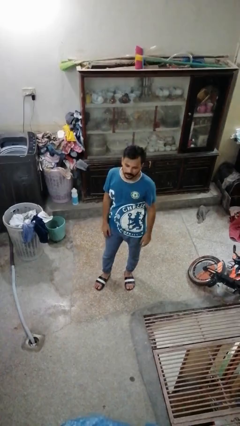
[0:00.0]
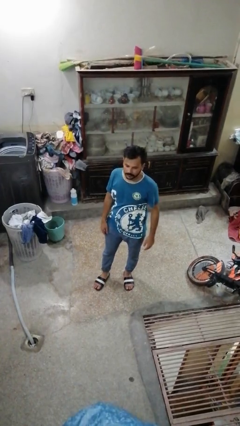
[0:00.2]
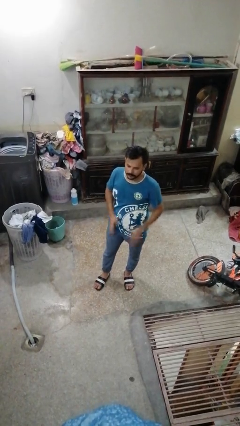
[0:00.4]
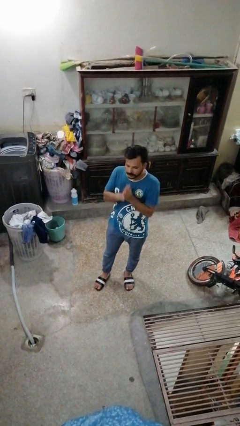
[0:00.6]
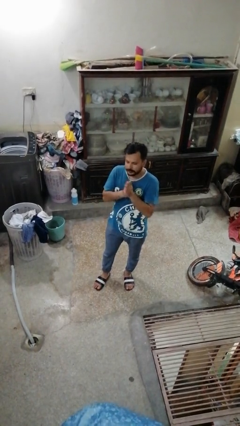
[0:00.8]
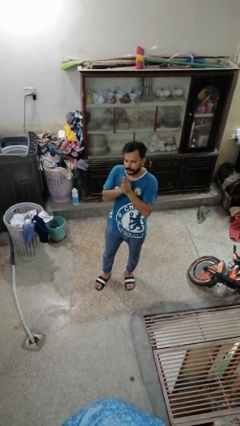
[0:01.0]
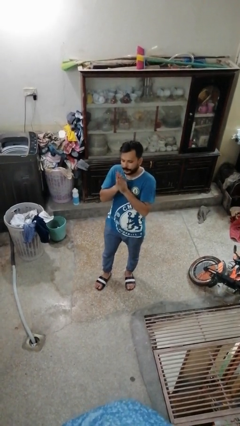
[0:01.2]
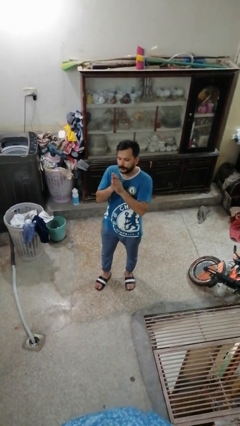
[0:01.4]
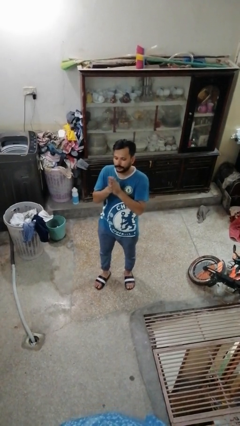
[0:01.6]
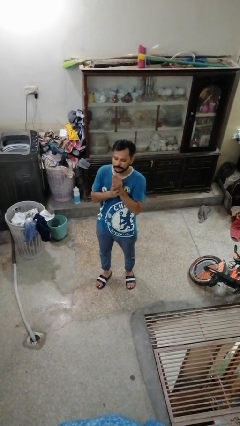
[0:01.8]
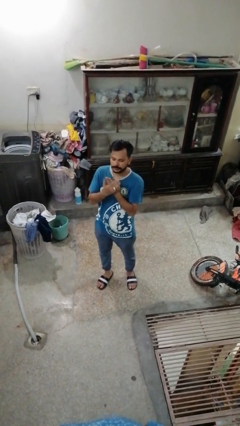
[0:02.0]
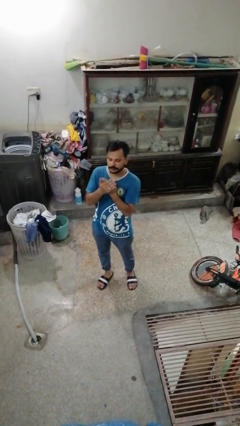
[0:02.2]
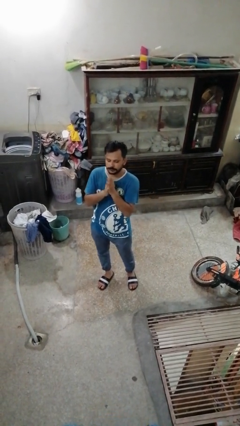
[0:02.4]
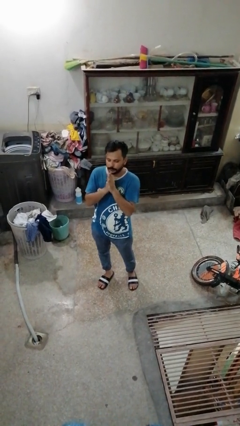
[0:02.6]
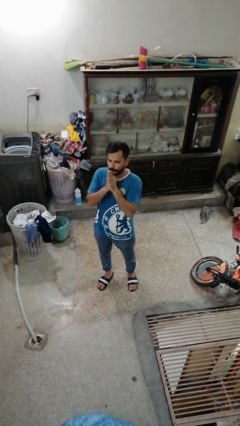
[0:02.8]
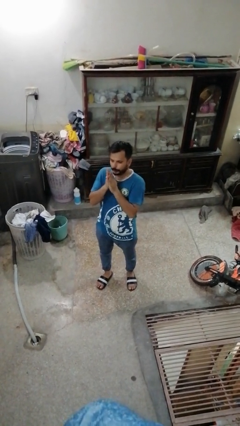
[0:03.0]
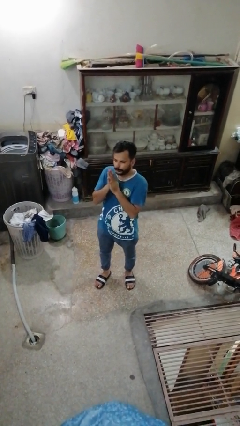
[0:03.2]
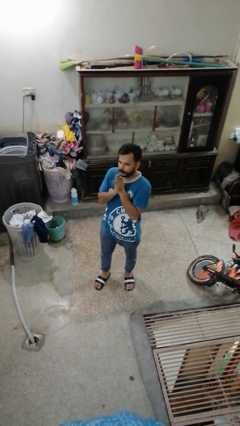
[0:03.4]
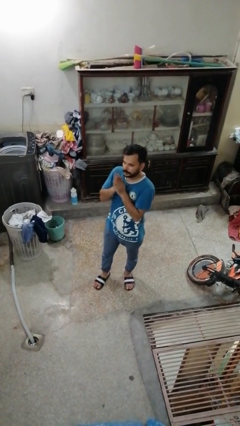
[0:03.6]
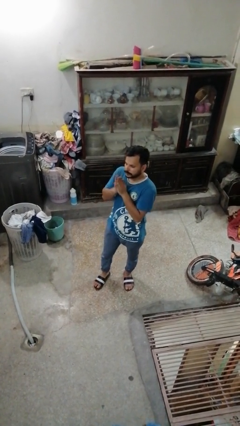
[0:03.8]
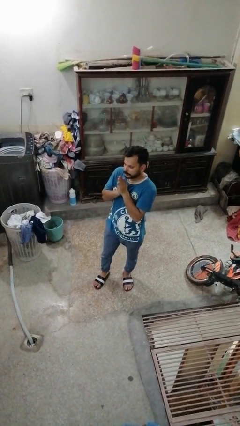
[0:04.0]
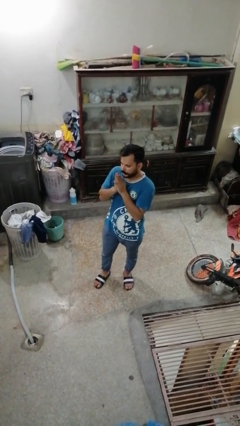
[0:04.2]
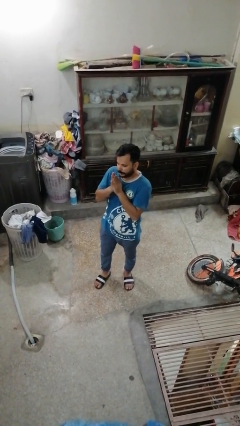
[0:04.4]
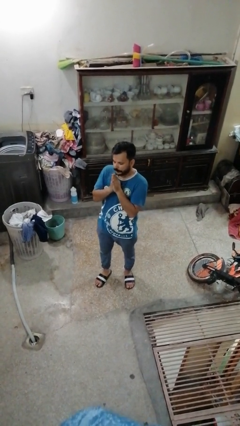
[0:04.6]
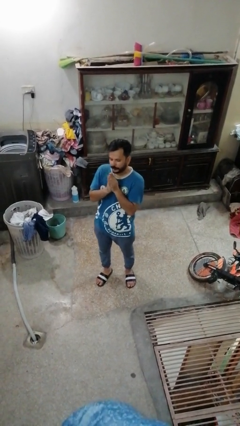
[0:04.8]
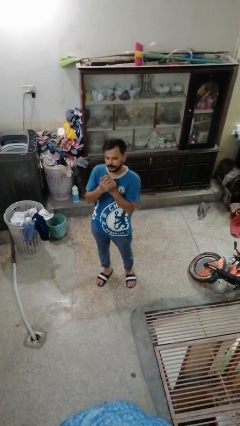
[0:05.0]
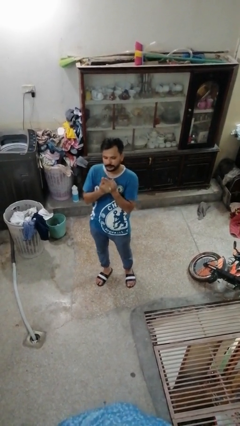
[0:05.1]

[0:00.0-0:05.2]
person blows into hands

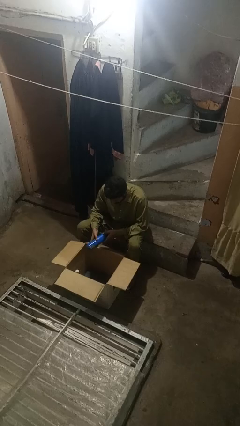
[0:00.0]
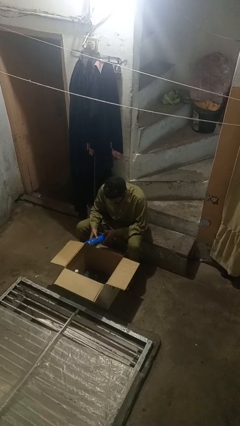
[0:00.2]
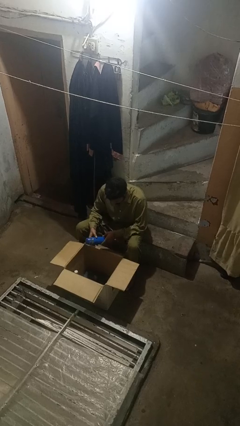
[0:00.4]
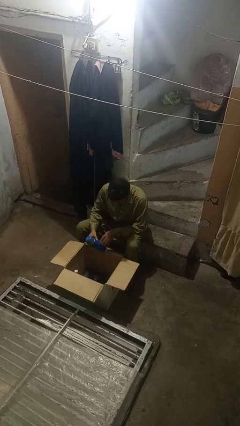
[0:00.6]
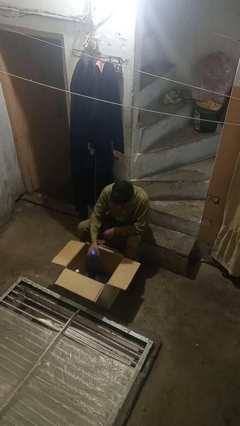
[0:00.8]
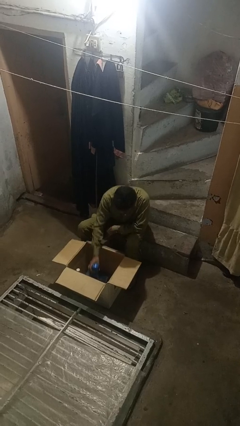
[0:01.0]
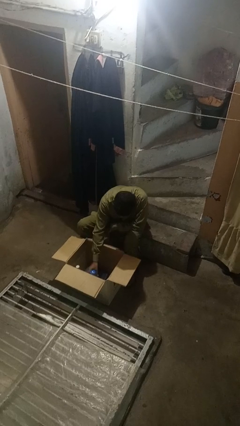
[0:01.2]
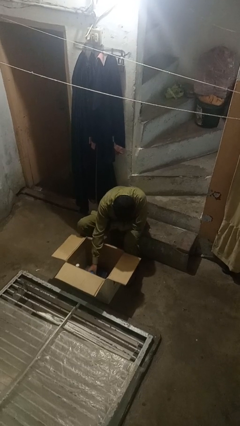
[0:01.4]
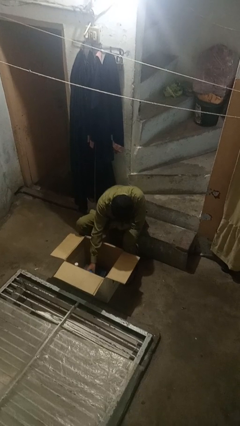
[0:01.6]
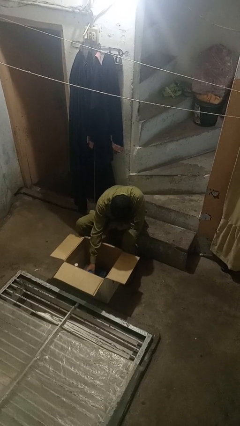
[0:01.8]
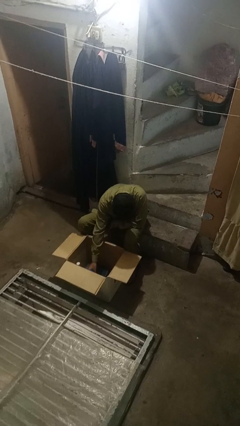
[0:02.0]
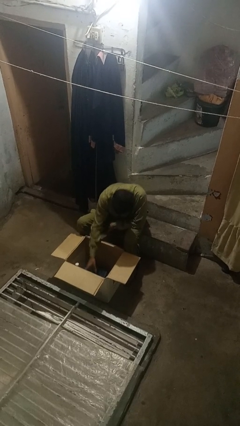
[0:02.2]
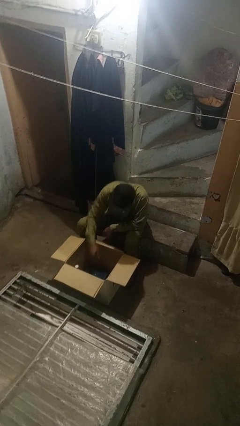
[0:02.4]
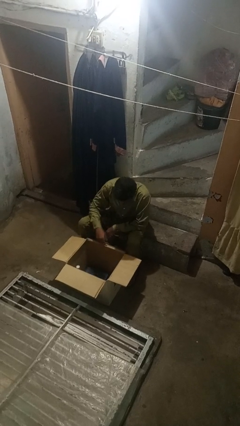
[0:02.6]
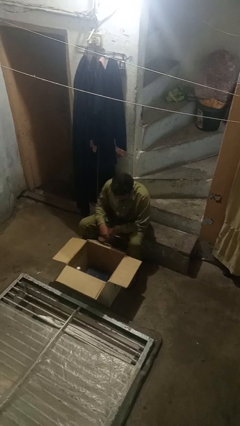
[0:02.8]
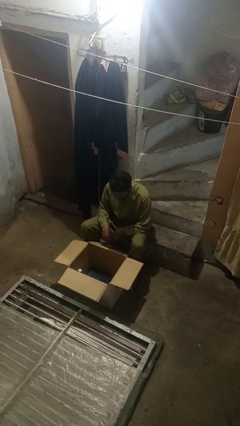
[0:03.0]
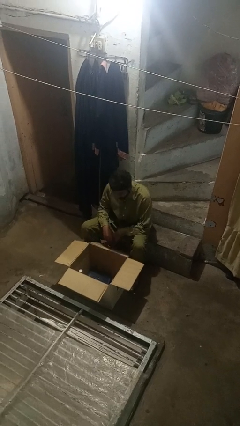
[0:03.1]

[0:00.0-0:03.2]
person puts object into box

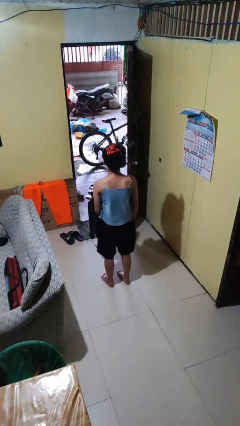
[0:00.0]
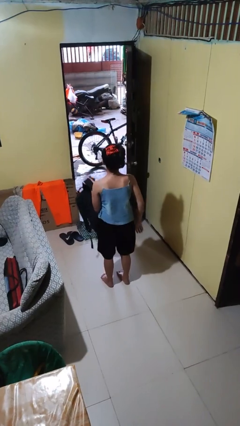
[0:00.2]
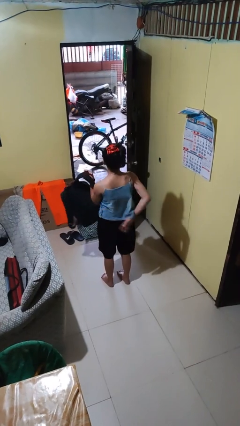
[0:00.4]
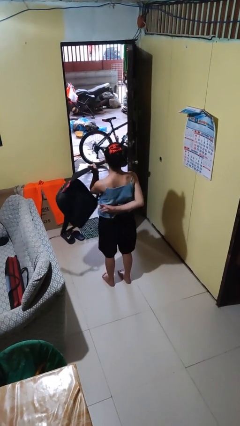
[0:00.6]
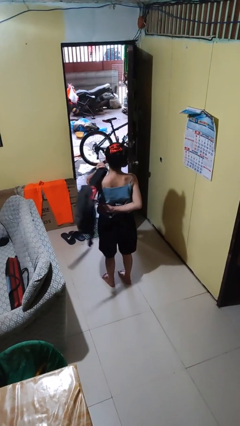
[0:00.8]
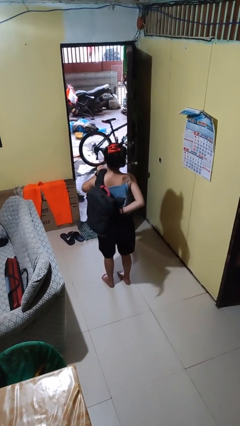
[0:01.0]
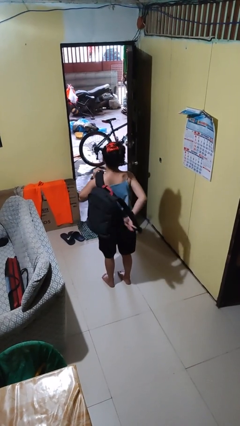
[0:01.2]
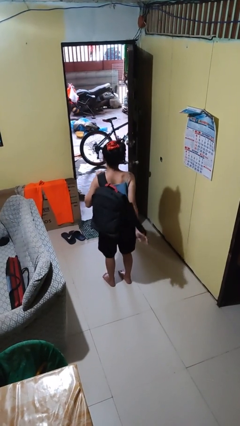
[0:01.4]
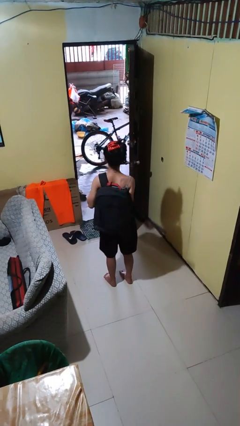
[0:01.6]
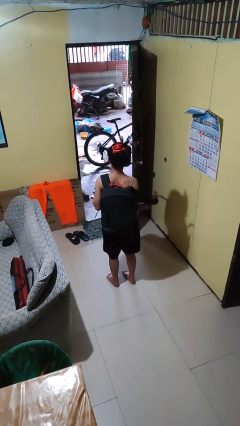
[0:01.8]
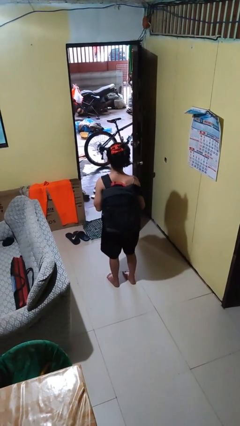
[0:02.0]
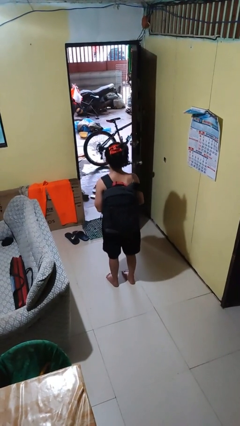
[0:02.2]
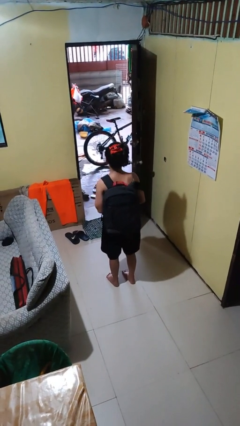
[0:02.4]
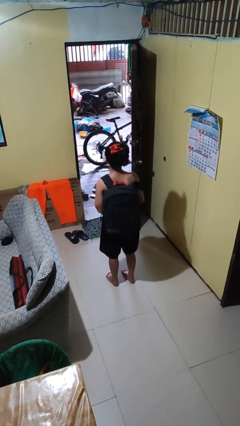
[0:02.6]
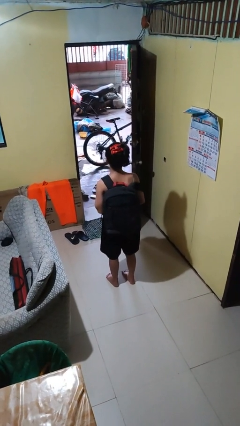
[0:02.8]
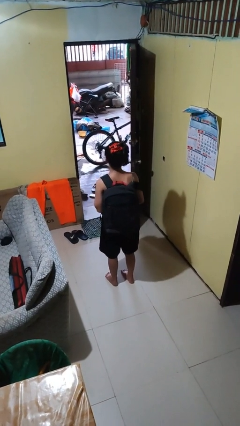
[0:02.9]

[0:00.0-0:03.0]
person puts on backpack

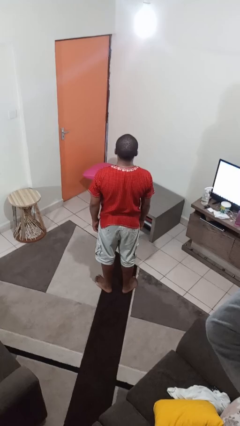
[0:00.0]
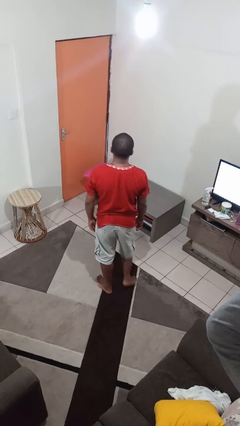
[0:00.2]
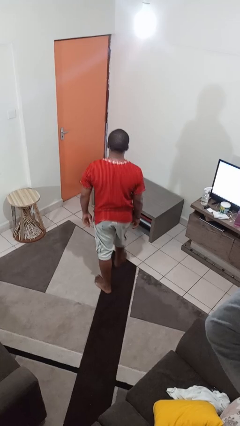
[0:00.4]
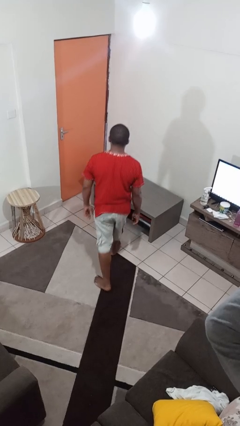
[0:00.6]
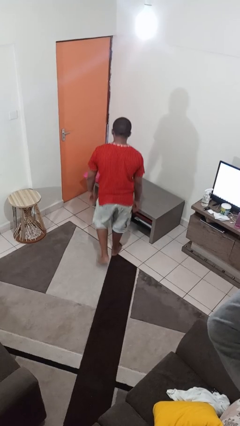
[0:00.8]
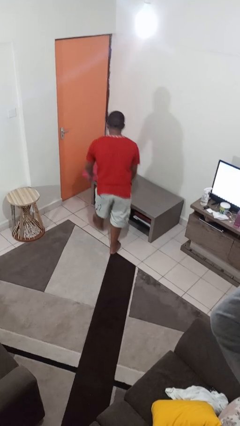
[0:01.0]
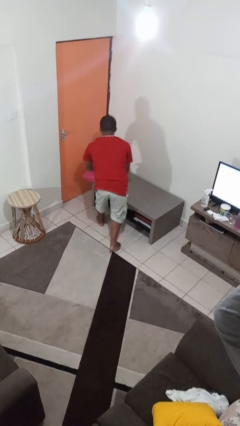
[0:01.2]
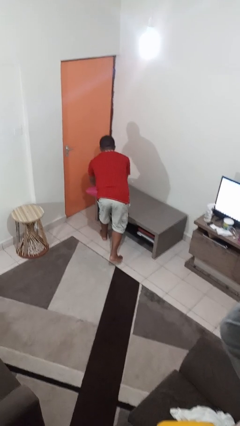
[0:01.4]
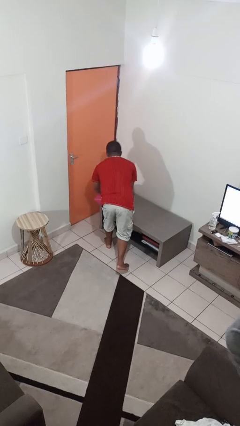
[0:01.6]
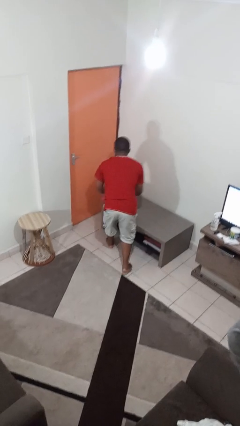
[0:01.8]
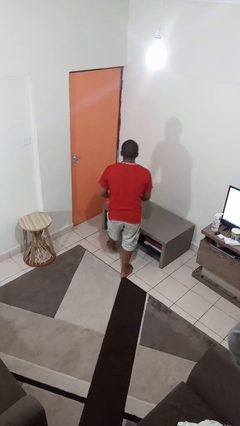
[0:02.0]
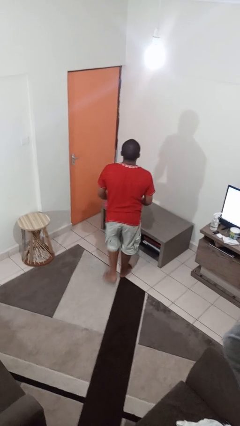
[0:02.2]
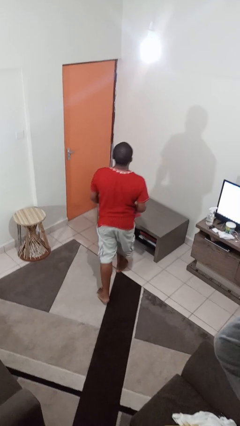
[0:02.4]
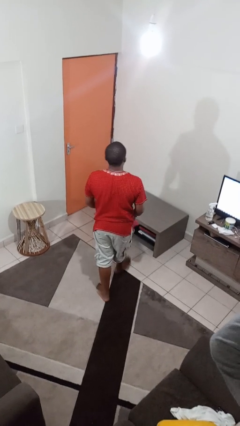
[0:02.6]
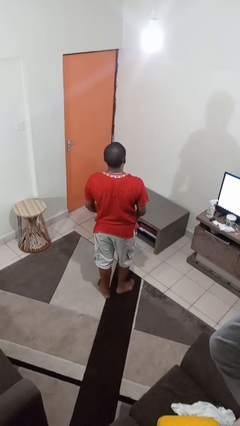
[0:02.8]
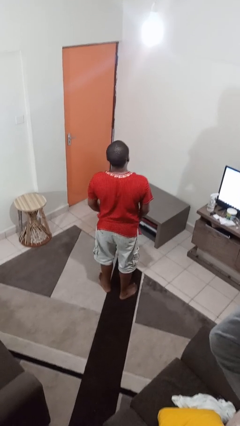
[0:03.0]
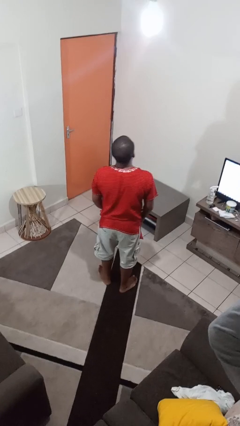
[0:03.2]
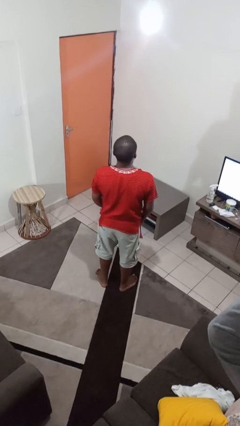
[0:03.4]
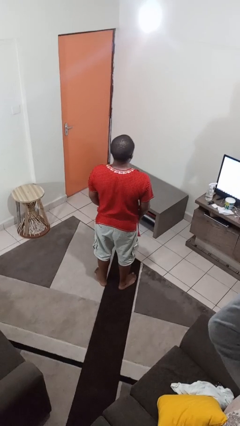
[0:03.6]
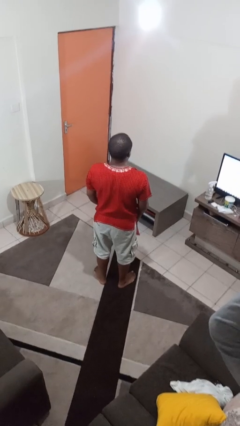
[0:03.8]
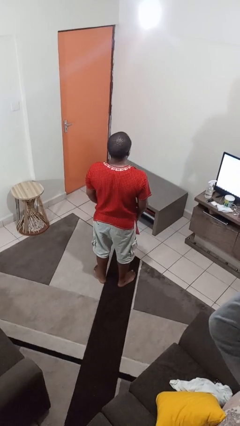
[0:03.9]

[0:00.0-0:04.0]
person picks up object from table

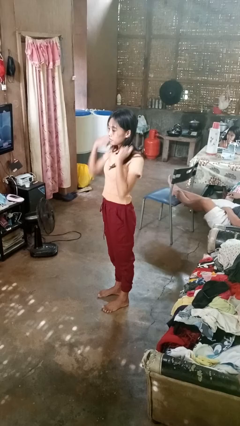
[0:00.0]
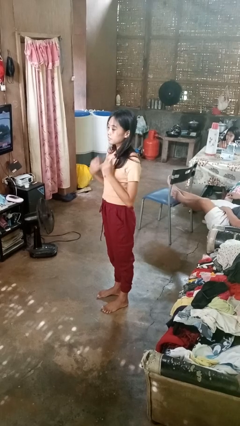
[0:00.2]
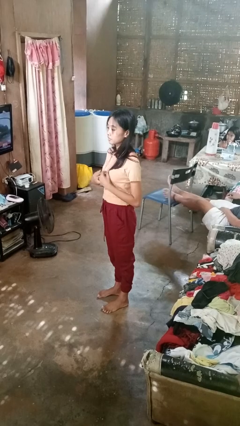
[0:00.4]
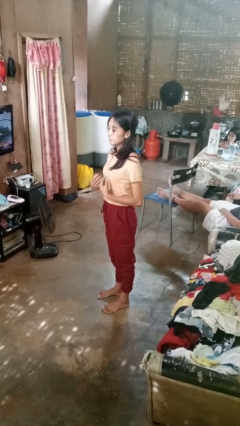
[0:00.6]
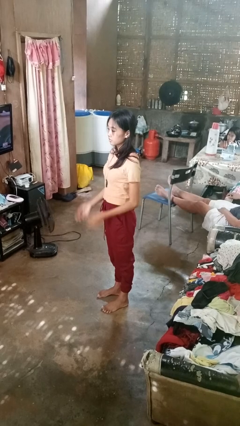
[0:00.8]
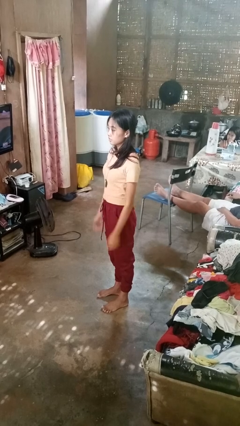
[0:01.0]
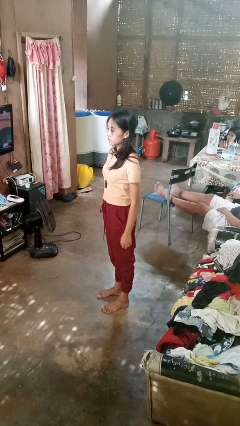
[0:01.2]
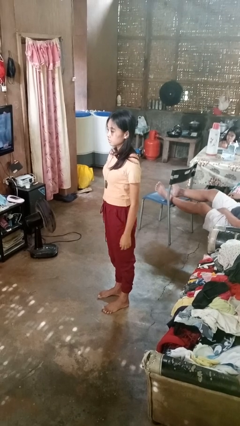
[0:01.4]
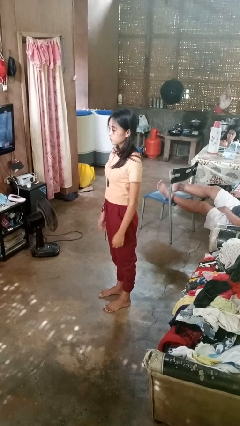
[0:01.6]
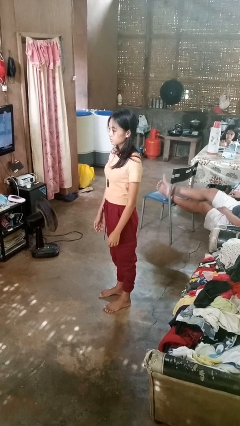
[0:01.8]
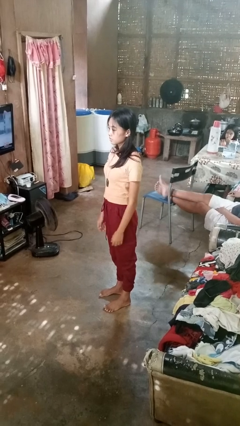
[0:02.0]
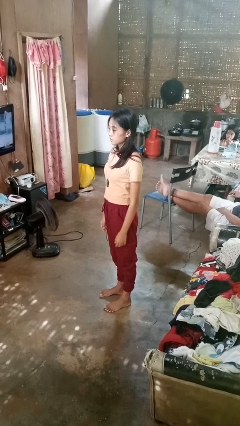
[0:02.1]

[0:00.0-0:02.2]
person takes off belt
